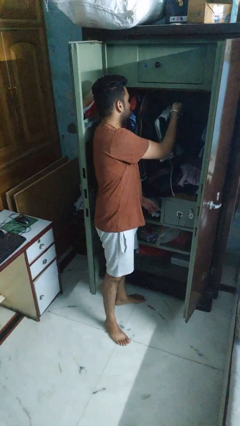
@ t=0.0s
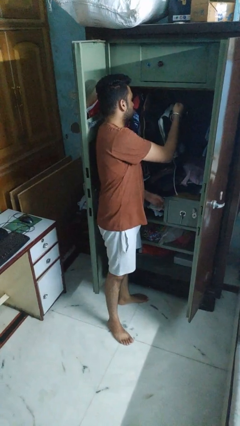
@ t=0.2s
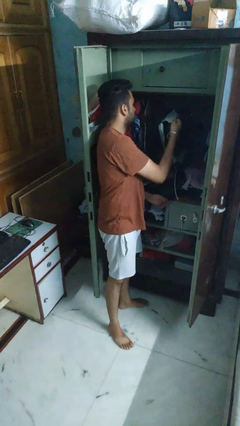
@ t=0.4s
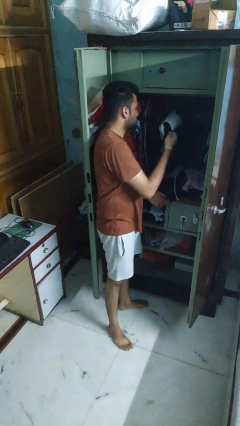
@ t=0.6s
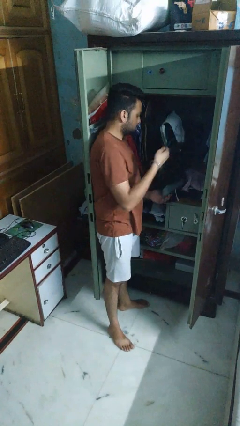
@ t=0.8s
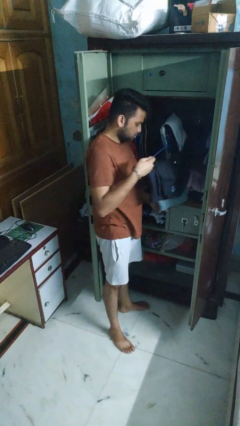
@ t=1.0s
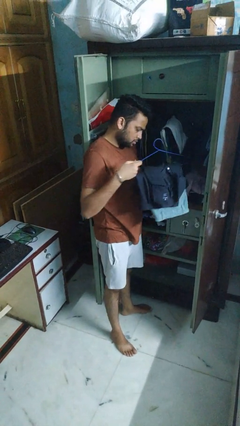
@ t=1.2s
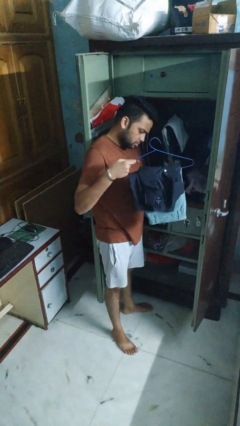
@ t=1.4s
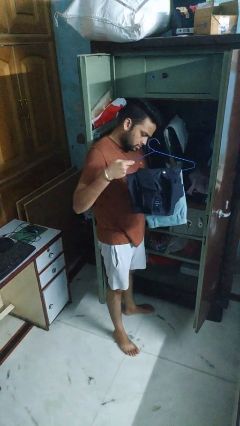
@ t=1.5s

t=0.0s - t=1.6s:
person takes clothes from closet

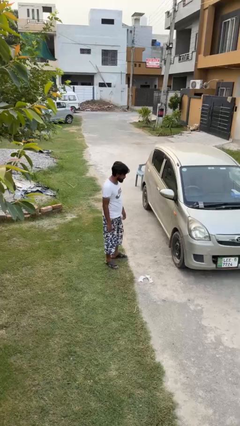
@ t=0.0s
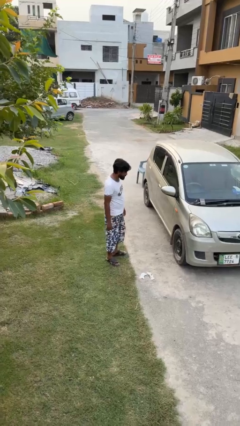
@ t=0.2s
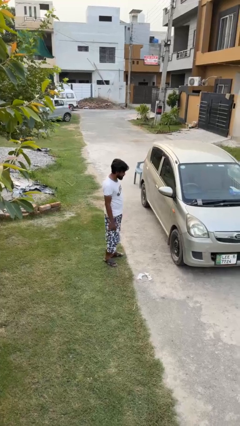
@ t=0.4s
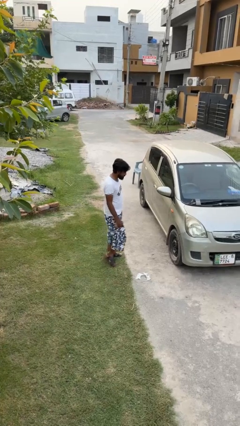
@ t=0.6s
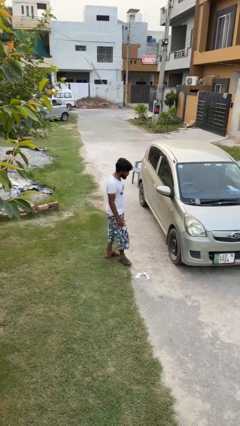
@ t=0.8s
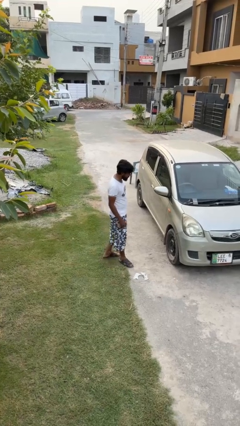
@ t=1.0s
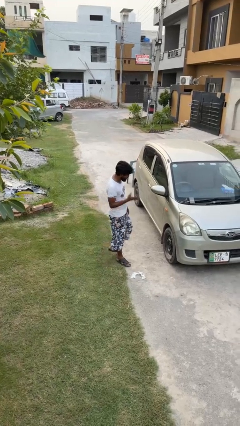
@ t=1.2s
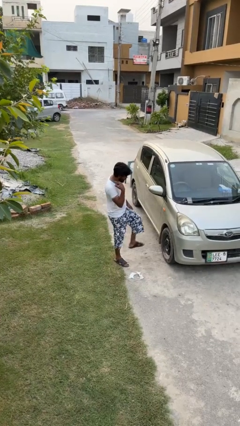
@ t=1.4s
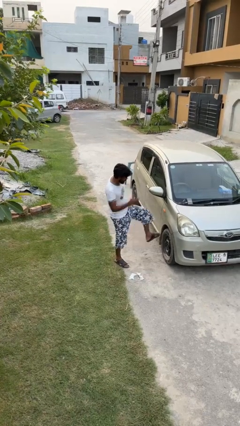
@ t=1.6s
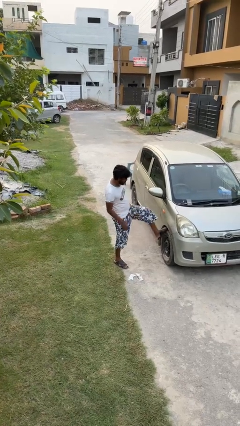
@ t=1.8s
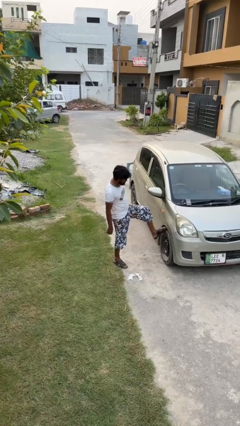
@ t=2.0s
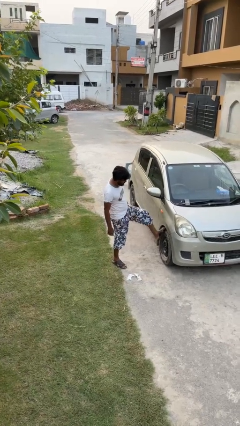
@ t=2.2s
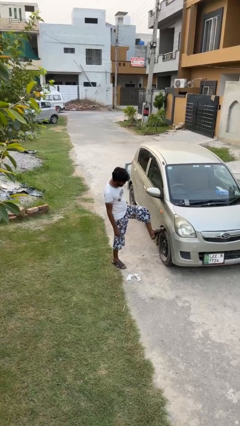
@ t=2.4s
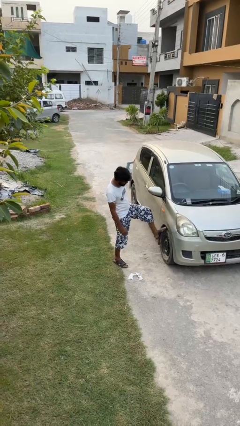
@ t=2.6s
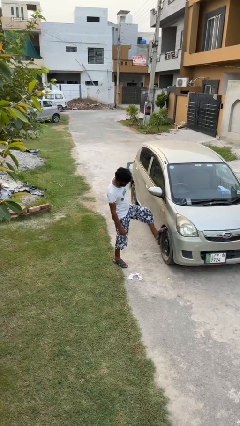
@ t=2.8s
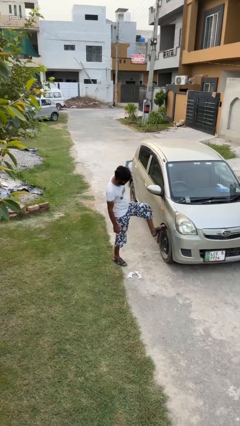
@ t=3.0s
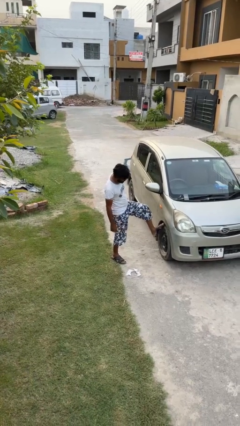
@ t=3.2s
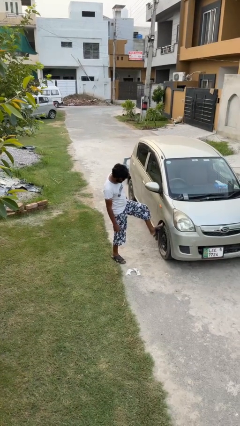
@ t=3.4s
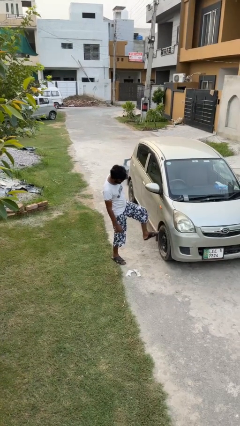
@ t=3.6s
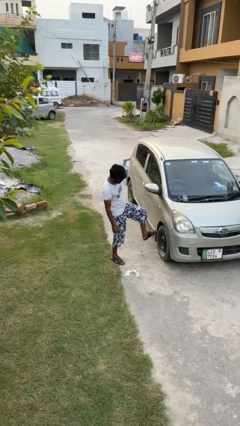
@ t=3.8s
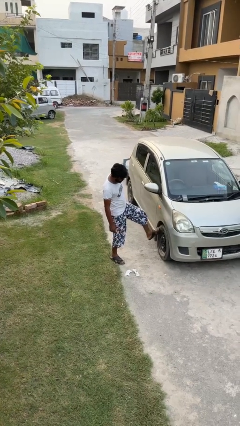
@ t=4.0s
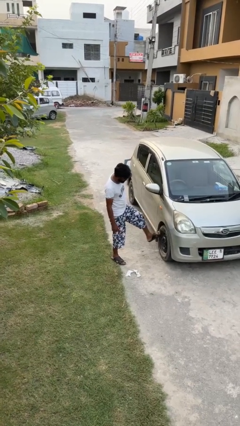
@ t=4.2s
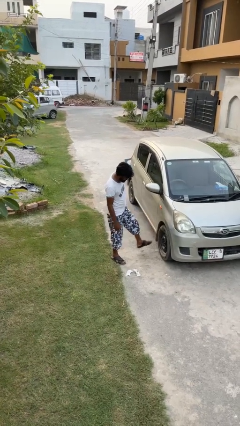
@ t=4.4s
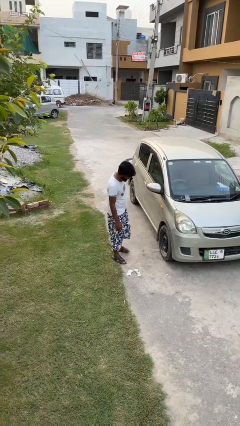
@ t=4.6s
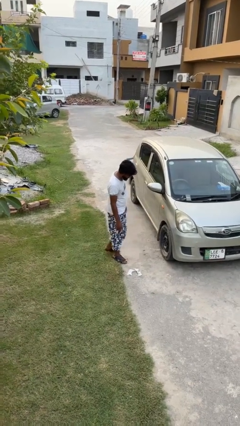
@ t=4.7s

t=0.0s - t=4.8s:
person kicks car tires

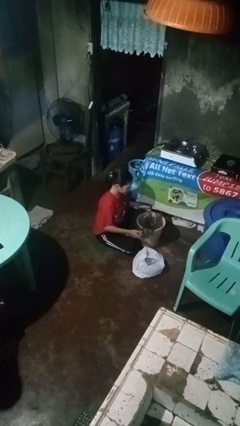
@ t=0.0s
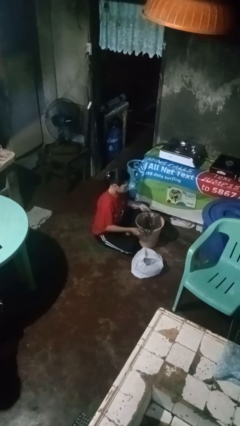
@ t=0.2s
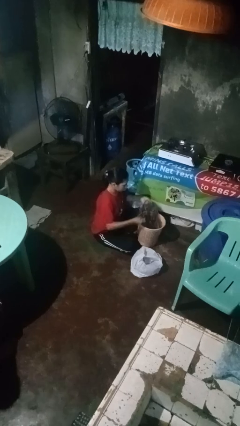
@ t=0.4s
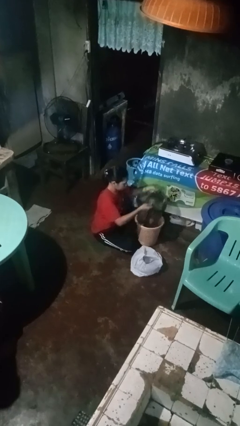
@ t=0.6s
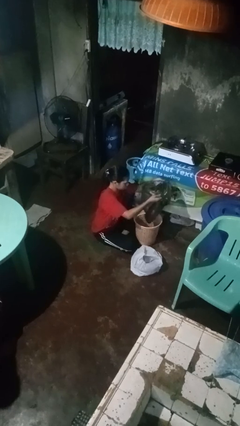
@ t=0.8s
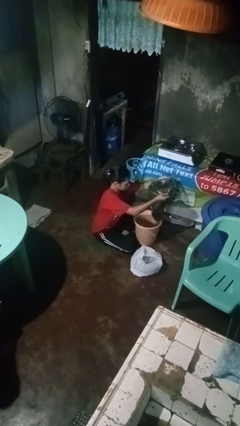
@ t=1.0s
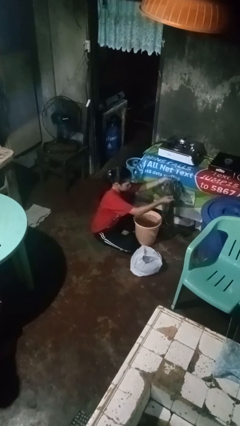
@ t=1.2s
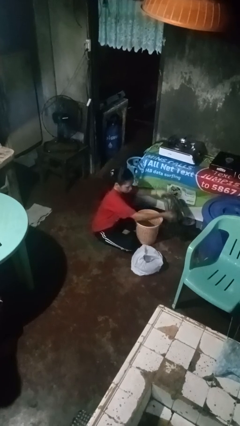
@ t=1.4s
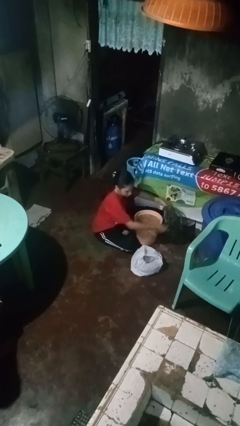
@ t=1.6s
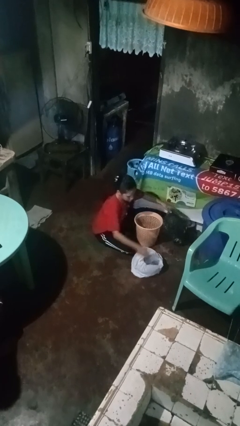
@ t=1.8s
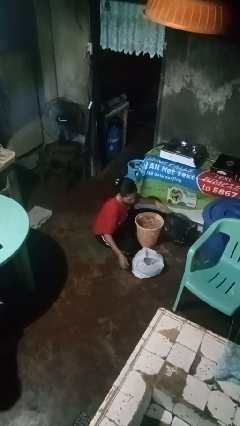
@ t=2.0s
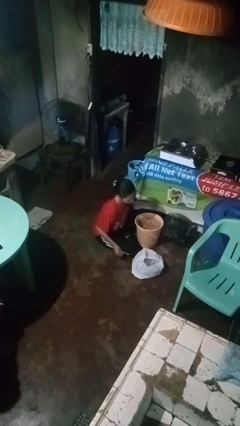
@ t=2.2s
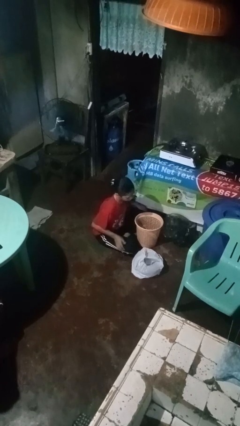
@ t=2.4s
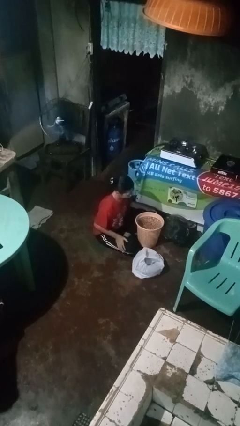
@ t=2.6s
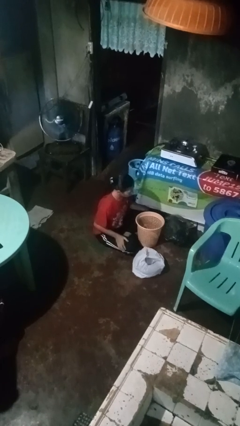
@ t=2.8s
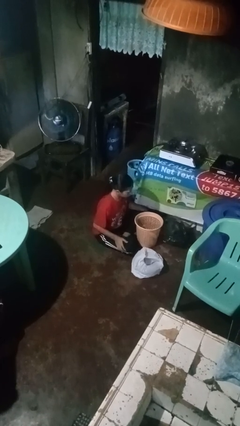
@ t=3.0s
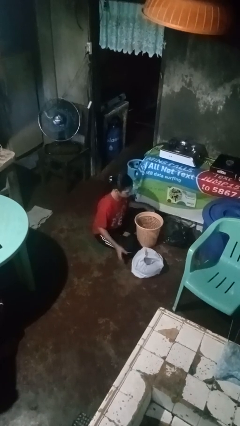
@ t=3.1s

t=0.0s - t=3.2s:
person removes trashbag from trashcan

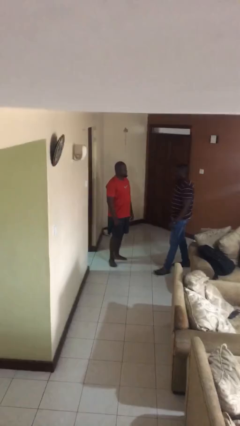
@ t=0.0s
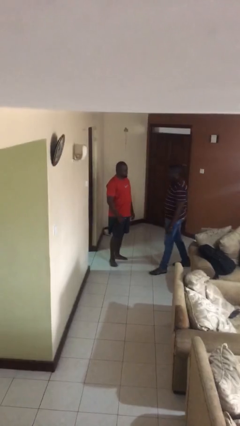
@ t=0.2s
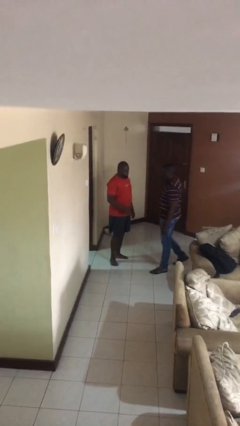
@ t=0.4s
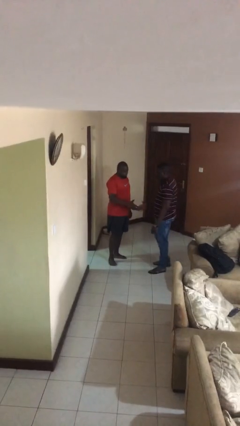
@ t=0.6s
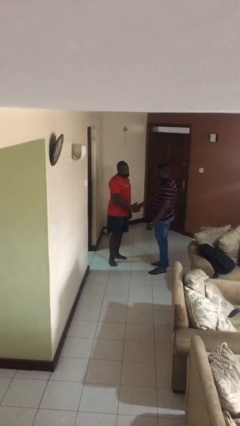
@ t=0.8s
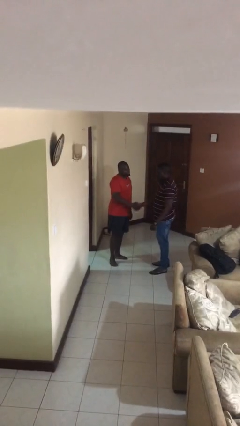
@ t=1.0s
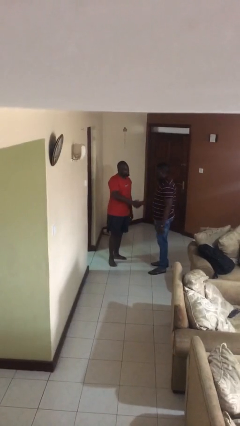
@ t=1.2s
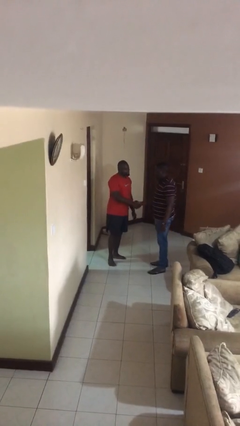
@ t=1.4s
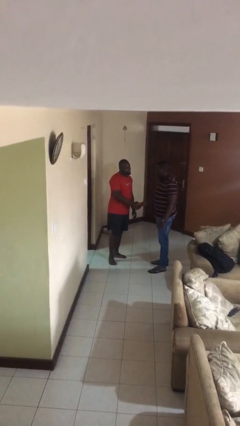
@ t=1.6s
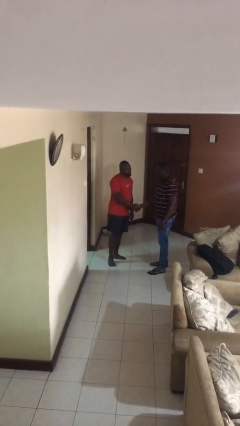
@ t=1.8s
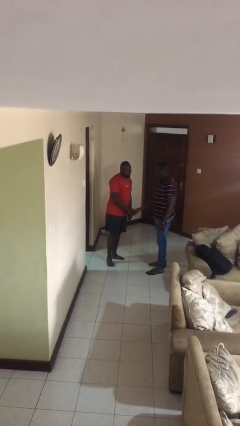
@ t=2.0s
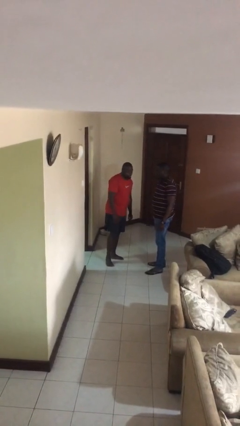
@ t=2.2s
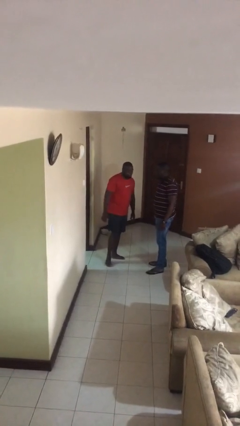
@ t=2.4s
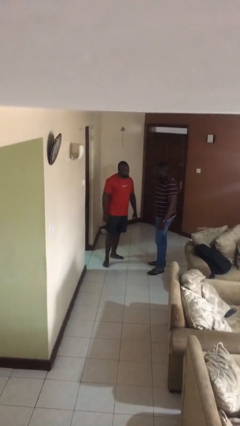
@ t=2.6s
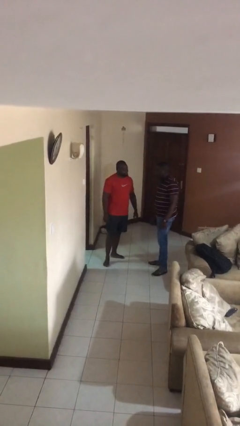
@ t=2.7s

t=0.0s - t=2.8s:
person shakes hand

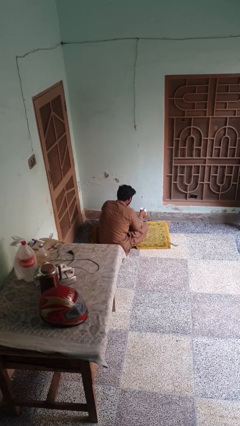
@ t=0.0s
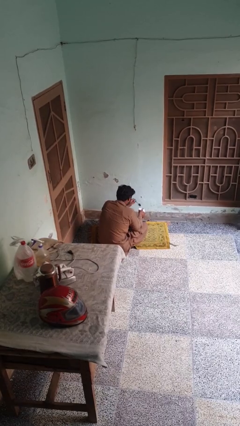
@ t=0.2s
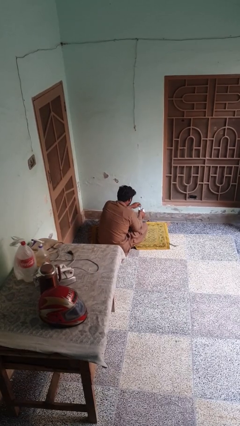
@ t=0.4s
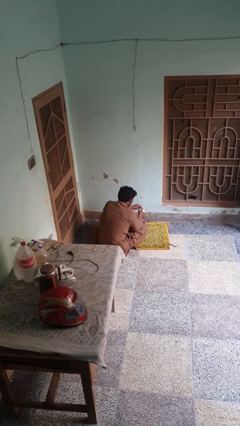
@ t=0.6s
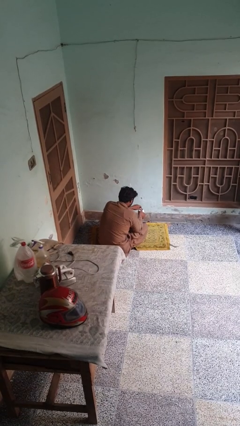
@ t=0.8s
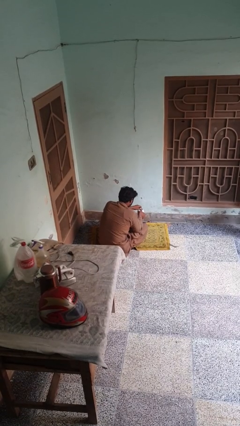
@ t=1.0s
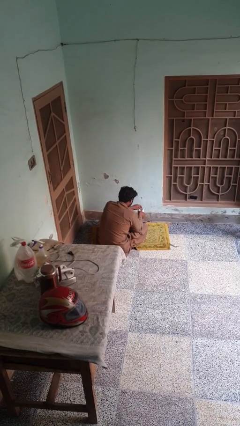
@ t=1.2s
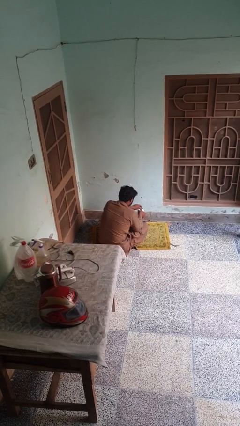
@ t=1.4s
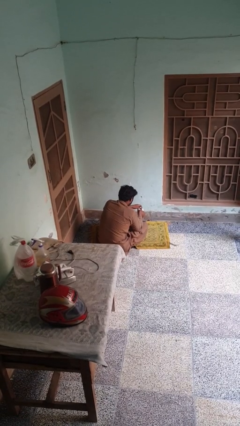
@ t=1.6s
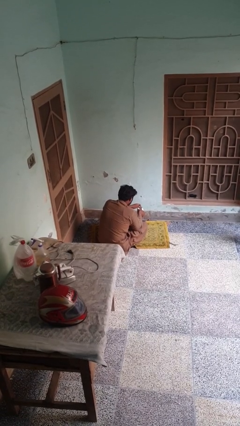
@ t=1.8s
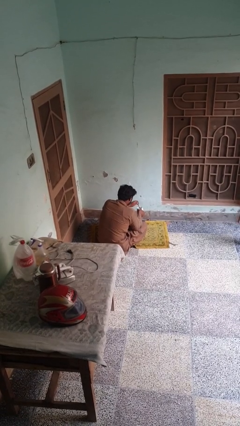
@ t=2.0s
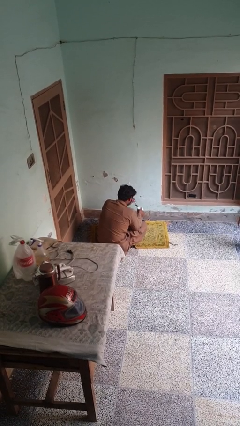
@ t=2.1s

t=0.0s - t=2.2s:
person stirs mug

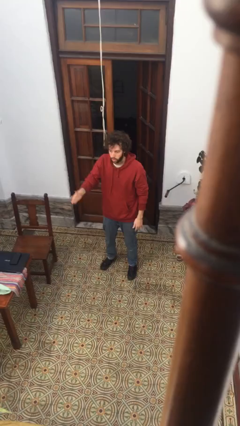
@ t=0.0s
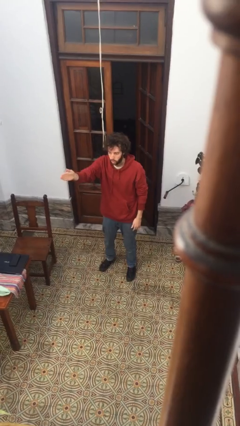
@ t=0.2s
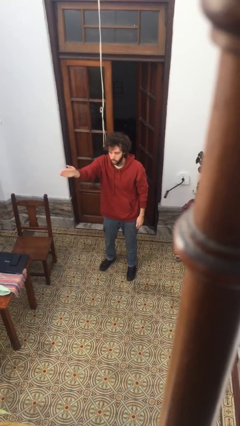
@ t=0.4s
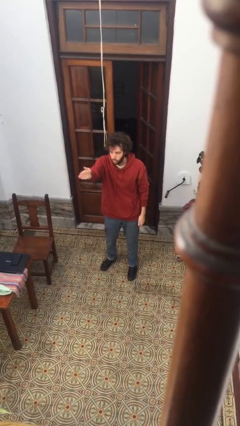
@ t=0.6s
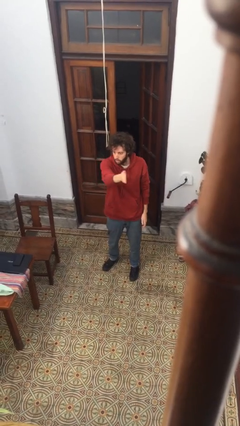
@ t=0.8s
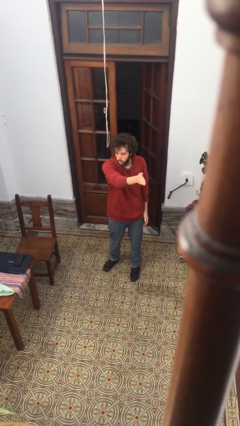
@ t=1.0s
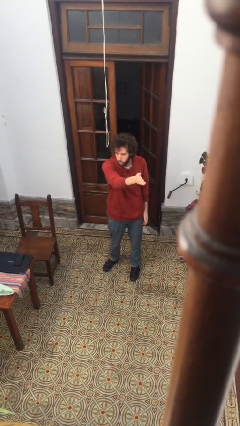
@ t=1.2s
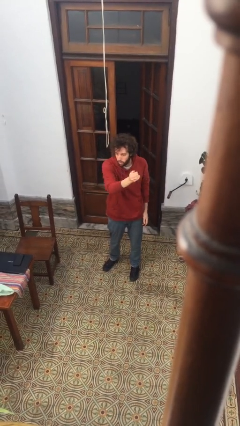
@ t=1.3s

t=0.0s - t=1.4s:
person gestures swipe left

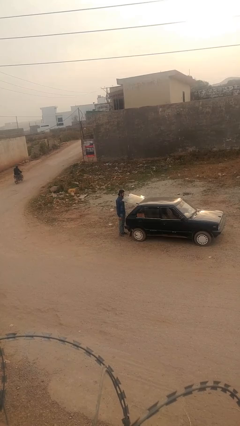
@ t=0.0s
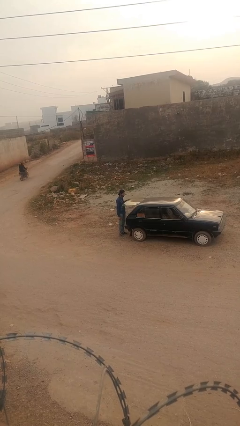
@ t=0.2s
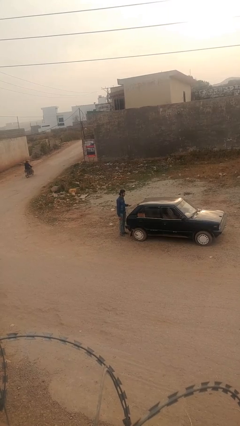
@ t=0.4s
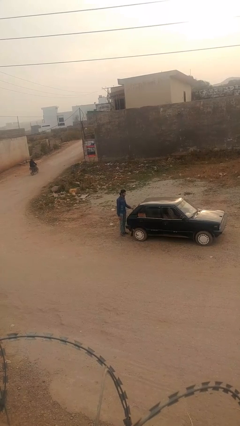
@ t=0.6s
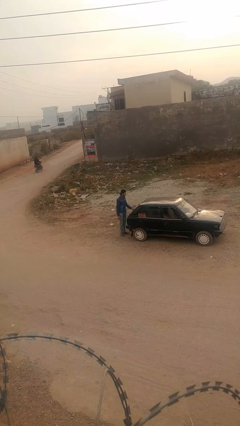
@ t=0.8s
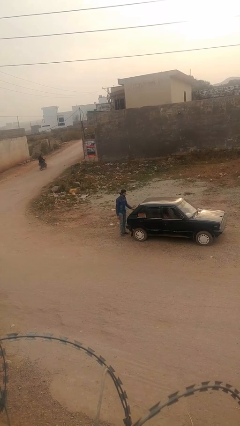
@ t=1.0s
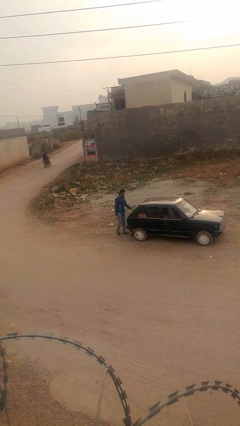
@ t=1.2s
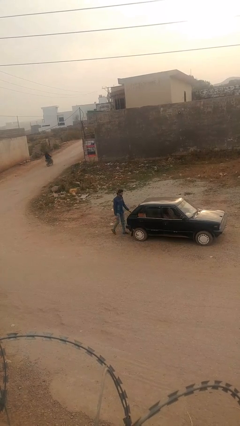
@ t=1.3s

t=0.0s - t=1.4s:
person closes car trunk
